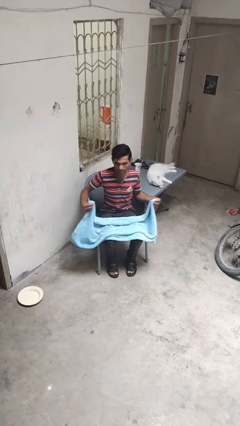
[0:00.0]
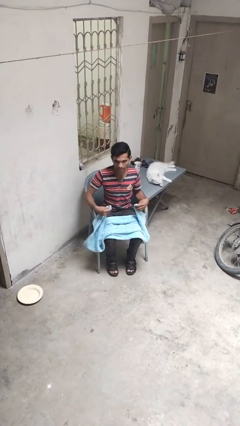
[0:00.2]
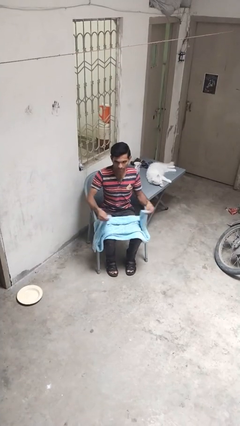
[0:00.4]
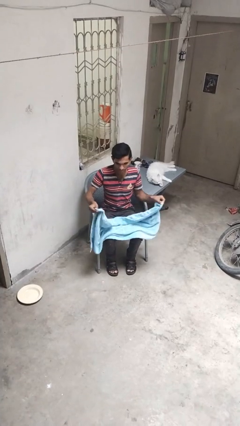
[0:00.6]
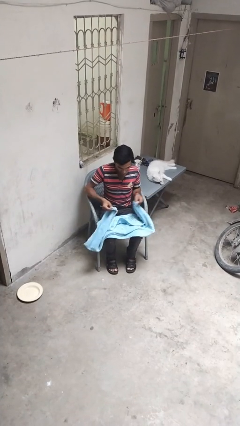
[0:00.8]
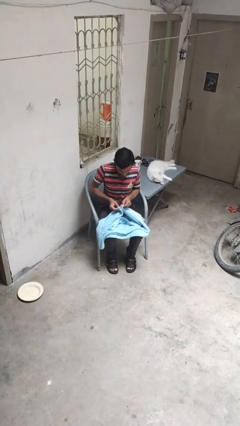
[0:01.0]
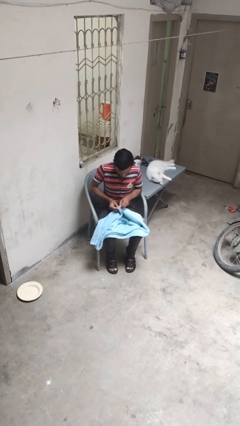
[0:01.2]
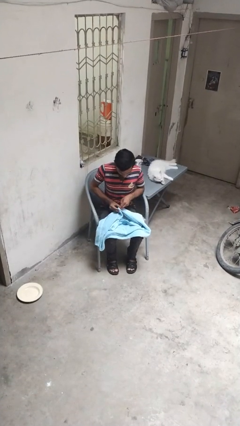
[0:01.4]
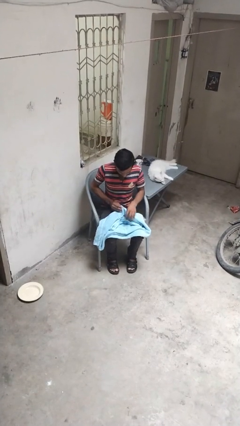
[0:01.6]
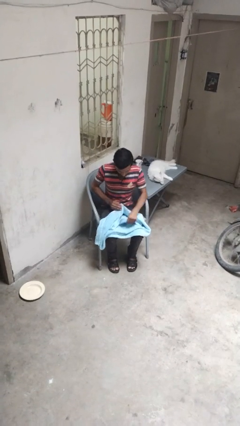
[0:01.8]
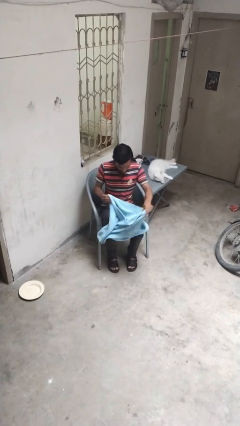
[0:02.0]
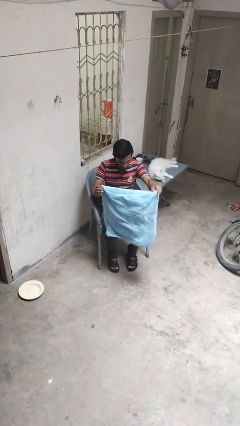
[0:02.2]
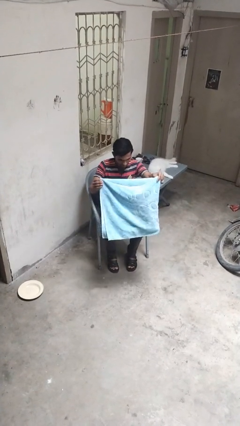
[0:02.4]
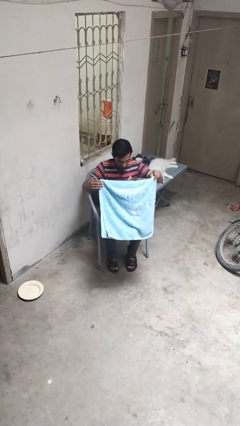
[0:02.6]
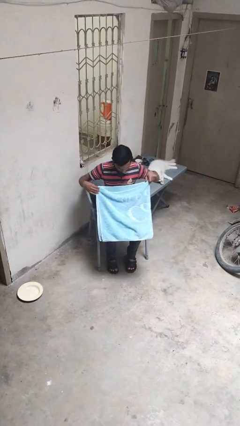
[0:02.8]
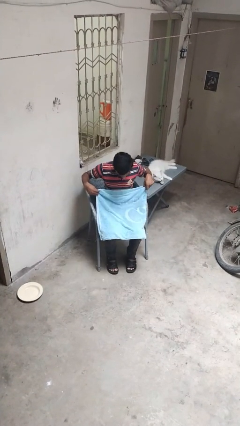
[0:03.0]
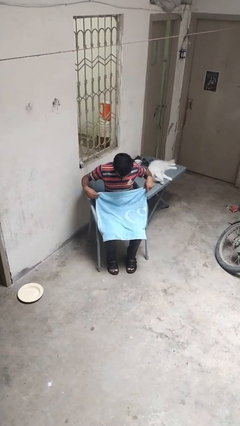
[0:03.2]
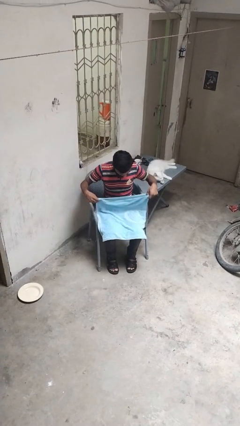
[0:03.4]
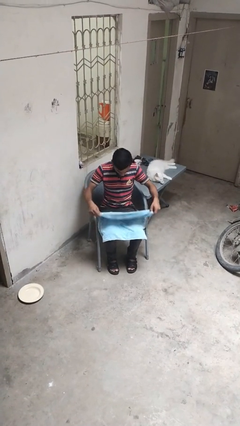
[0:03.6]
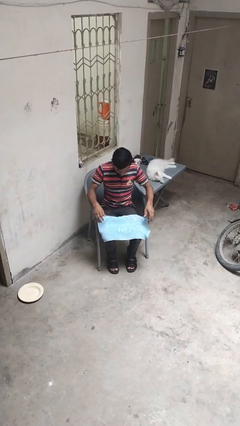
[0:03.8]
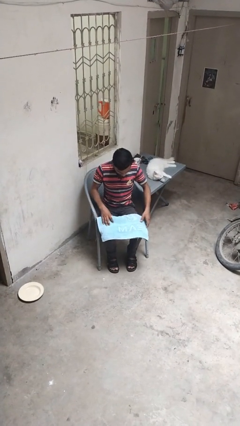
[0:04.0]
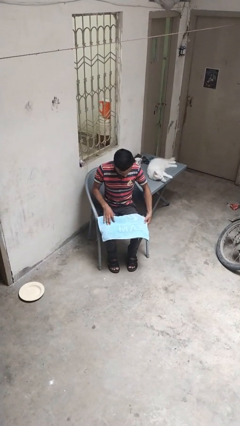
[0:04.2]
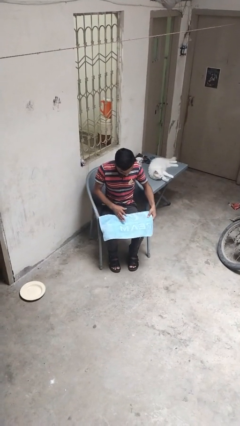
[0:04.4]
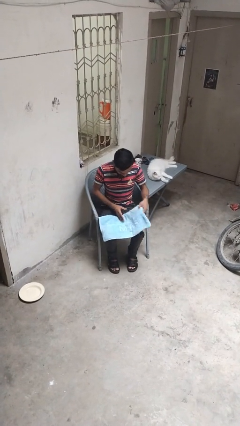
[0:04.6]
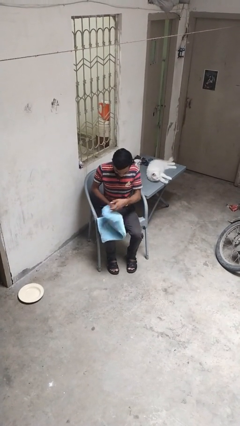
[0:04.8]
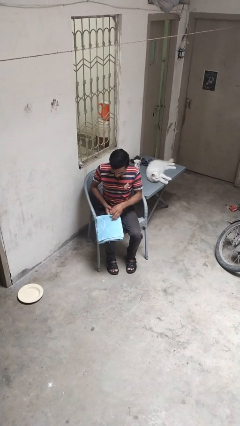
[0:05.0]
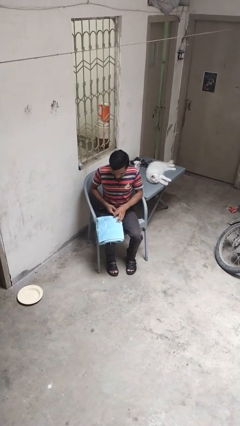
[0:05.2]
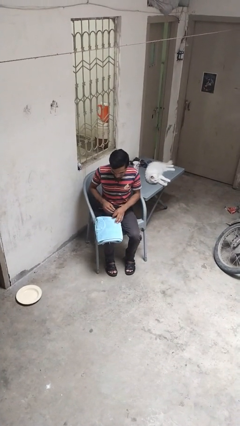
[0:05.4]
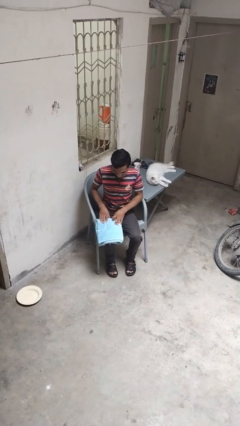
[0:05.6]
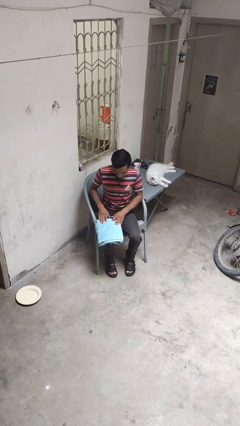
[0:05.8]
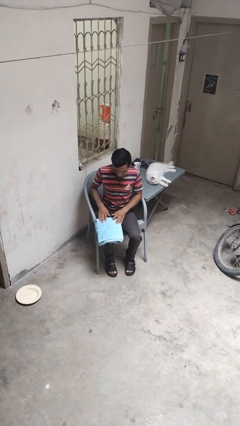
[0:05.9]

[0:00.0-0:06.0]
person folds towel

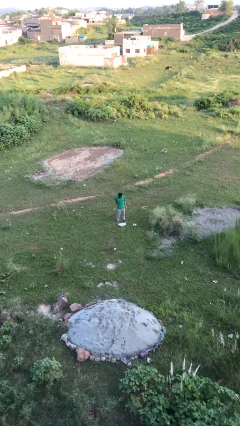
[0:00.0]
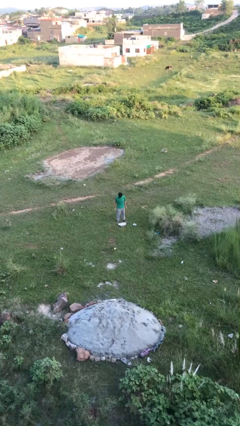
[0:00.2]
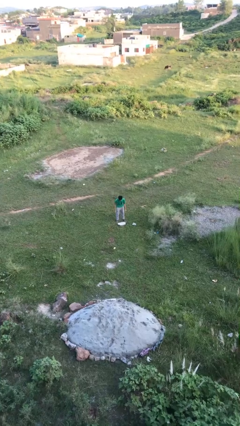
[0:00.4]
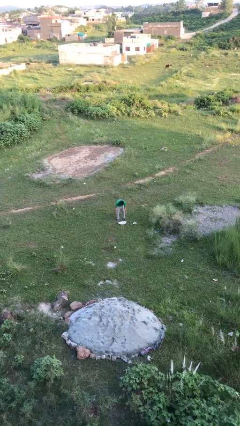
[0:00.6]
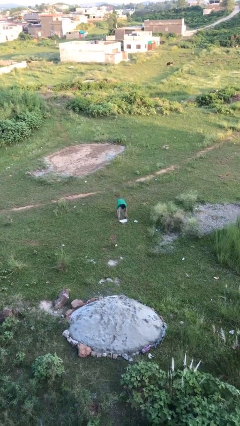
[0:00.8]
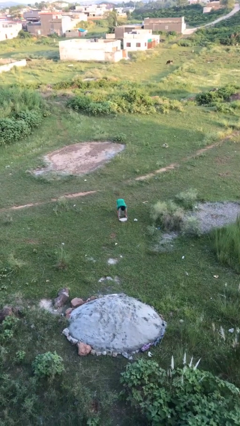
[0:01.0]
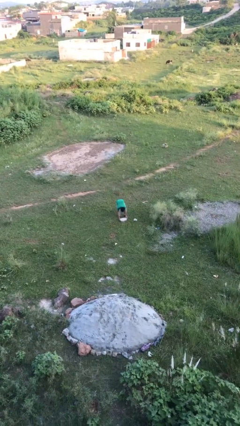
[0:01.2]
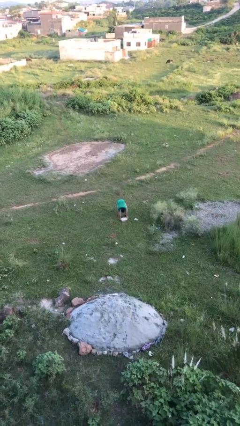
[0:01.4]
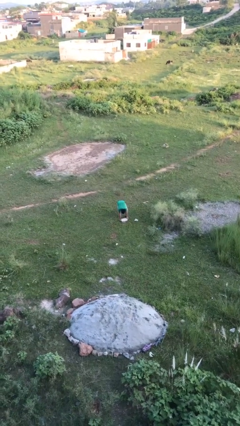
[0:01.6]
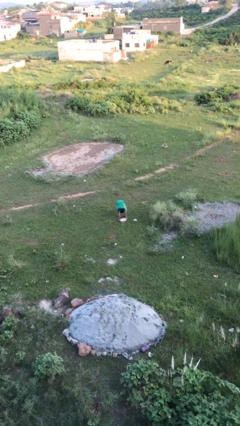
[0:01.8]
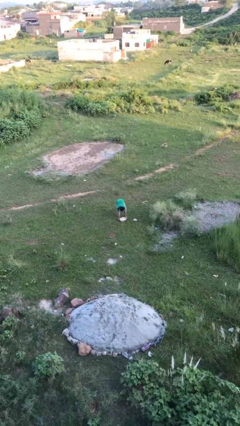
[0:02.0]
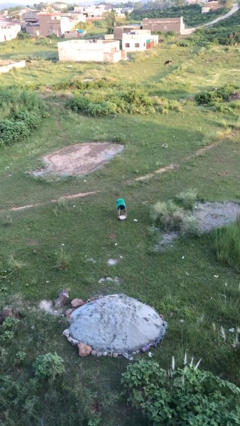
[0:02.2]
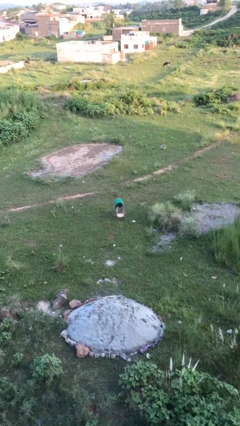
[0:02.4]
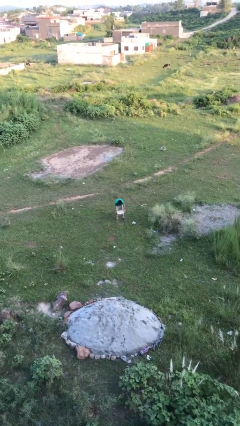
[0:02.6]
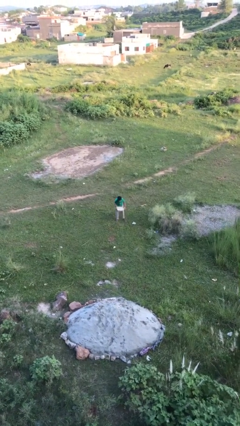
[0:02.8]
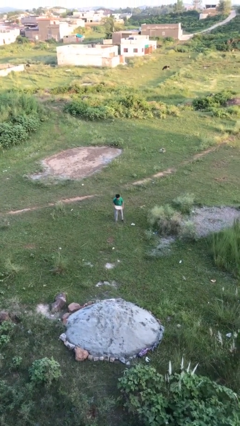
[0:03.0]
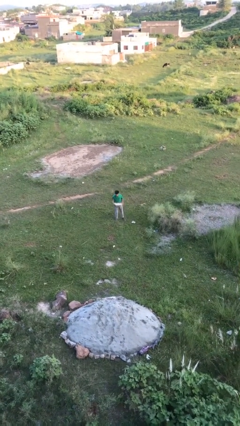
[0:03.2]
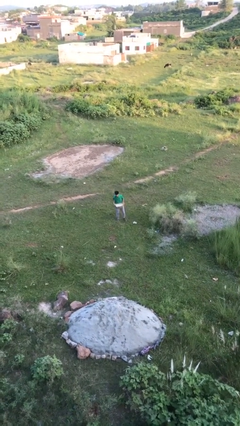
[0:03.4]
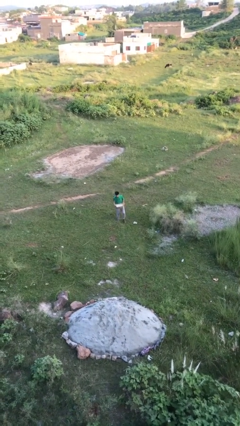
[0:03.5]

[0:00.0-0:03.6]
person picks up object from floor

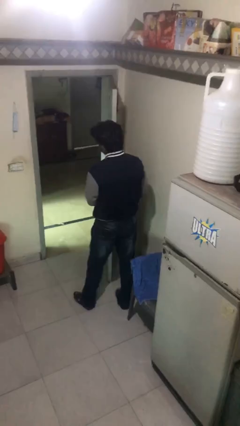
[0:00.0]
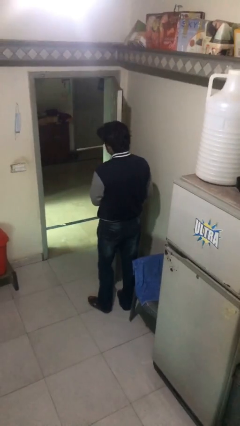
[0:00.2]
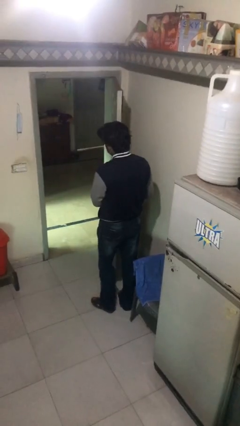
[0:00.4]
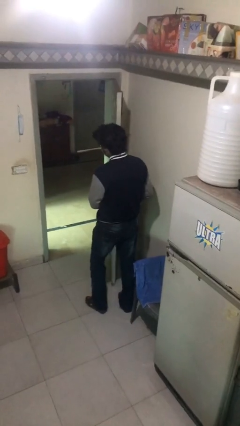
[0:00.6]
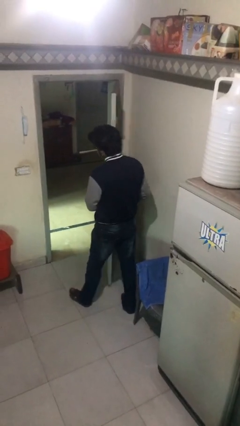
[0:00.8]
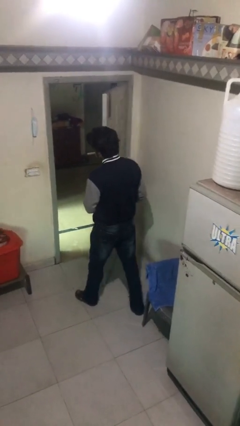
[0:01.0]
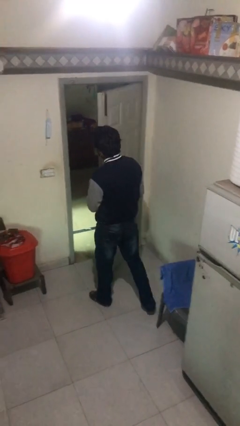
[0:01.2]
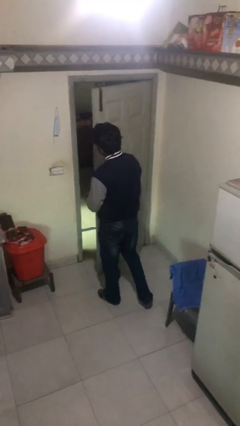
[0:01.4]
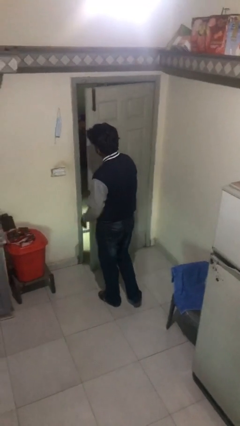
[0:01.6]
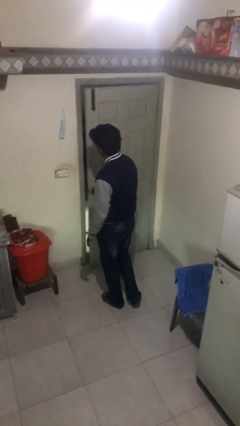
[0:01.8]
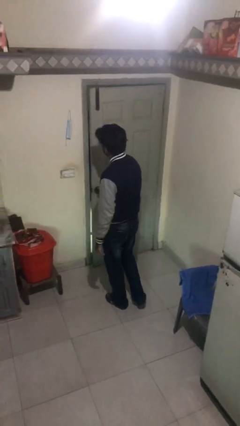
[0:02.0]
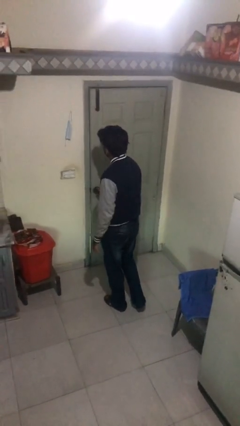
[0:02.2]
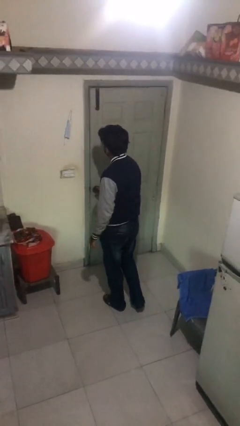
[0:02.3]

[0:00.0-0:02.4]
person closes facility door

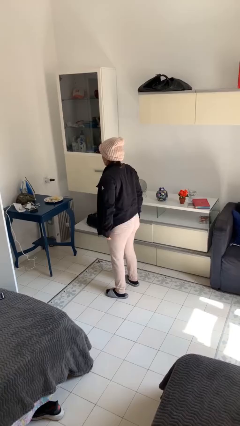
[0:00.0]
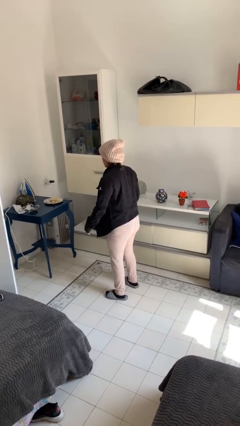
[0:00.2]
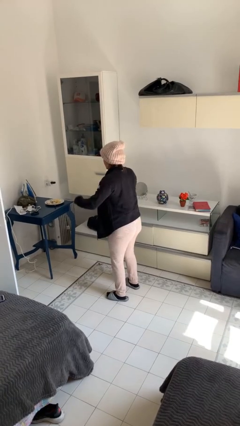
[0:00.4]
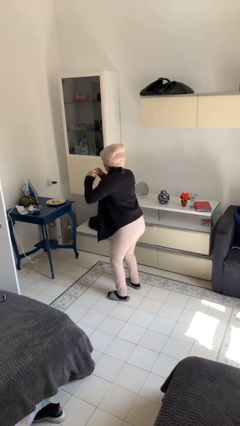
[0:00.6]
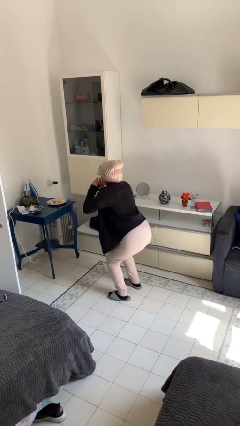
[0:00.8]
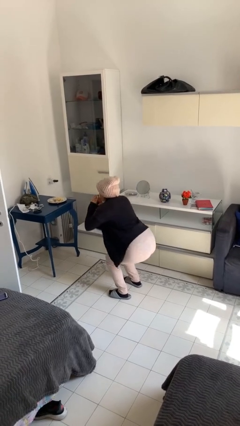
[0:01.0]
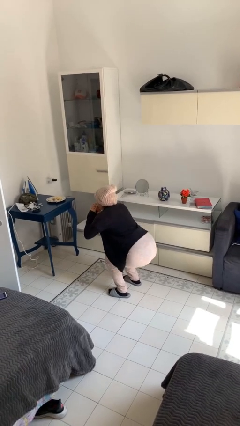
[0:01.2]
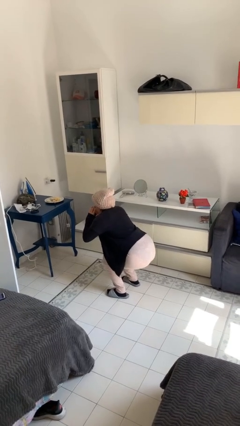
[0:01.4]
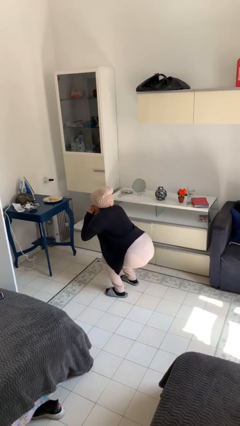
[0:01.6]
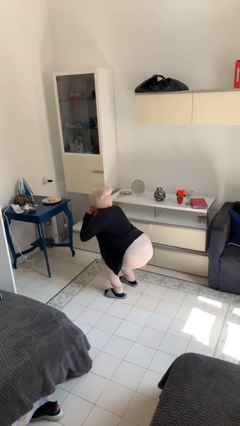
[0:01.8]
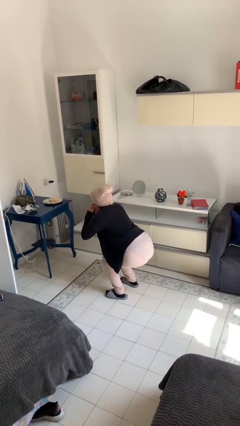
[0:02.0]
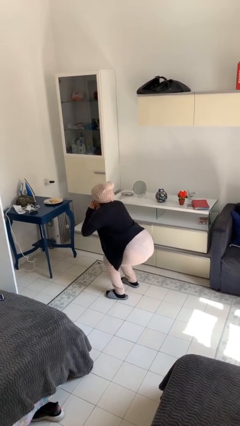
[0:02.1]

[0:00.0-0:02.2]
person squats

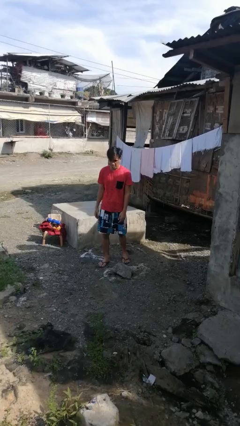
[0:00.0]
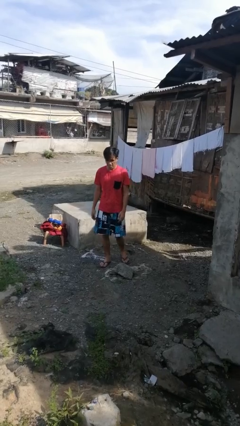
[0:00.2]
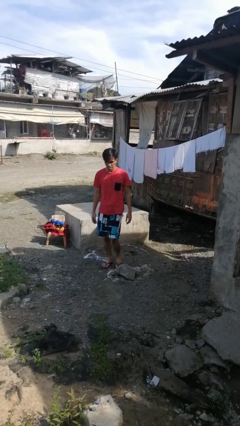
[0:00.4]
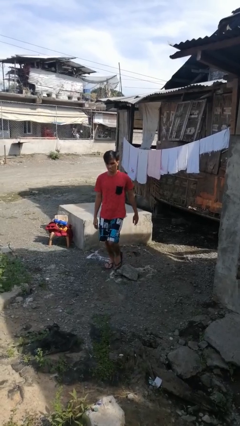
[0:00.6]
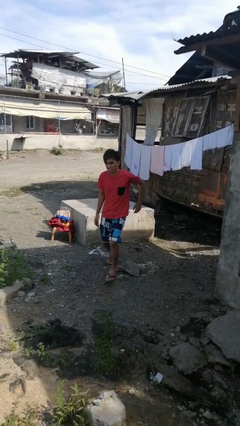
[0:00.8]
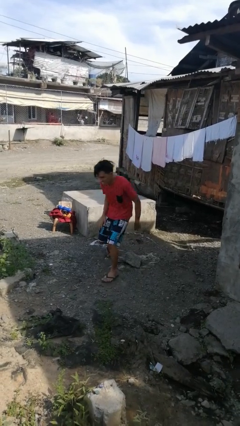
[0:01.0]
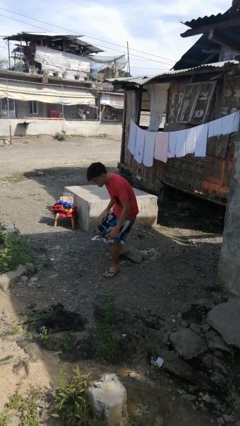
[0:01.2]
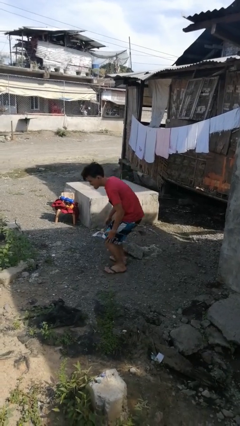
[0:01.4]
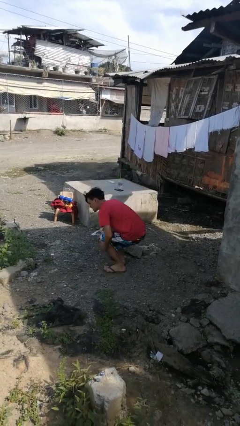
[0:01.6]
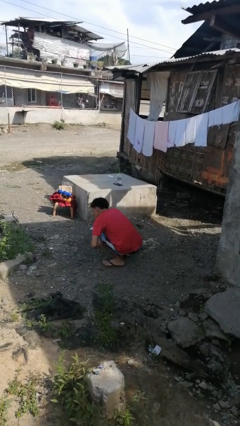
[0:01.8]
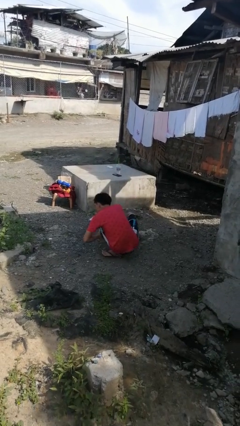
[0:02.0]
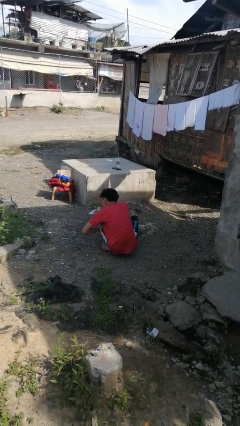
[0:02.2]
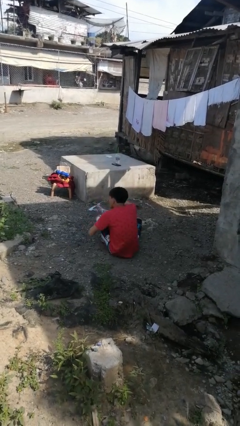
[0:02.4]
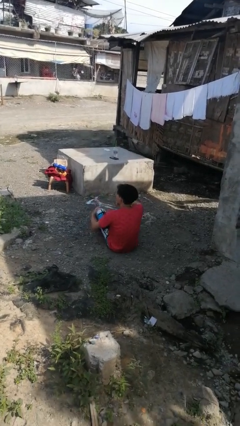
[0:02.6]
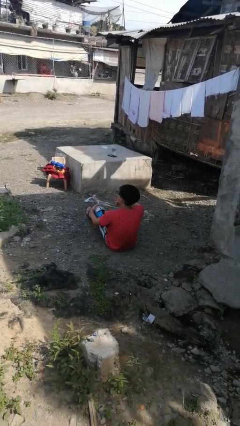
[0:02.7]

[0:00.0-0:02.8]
person trips on object on floor

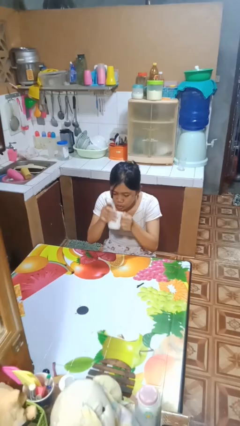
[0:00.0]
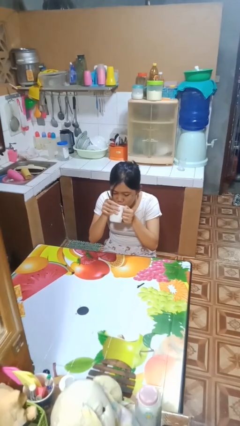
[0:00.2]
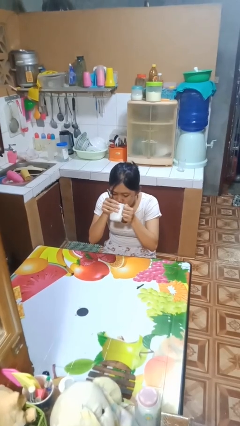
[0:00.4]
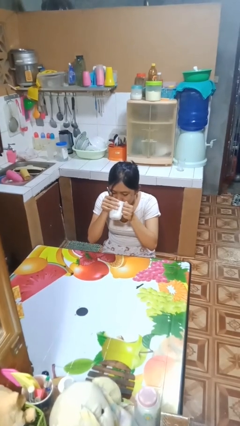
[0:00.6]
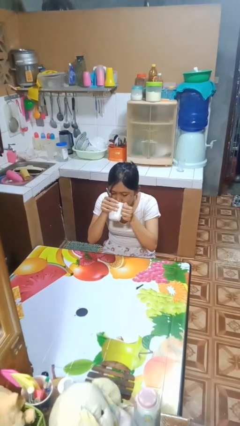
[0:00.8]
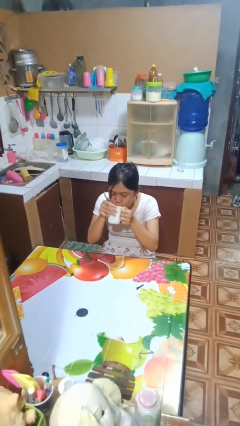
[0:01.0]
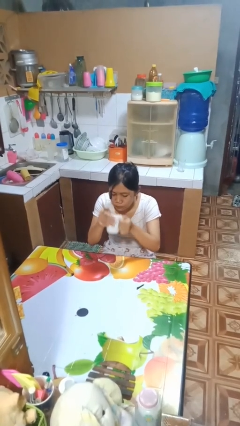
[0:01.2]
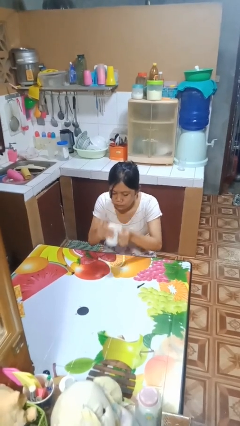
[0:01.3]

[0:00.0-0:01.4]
person drinks from mug
